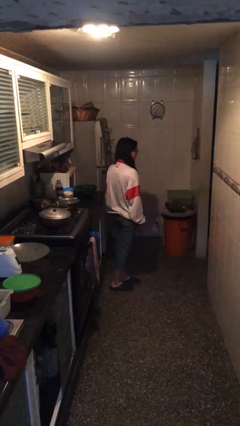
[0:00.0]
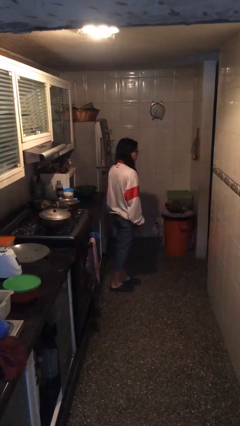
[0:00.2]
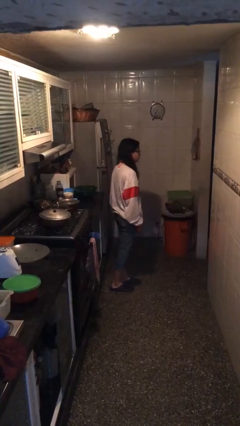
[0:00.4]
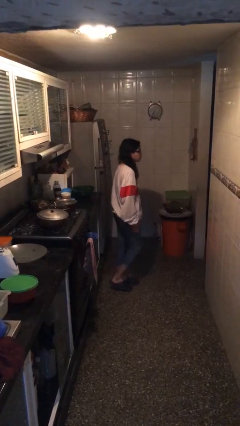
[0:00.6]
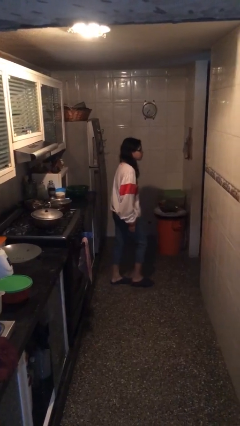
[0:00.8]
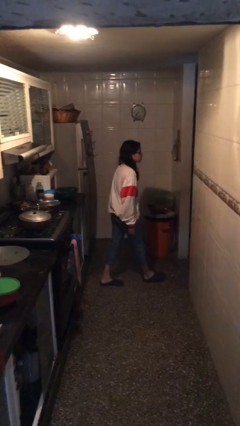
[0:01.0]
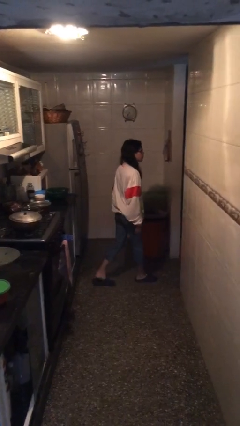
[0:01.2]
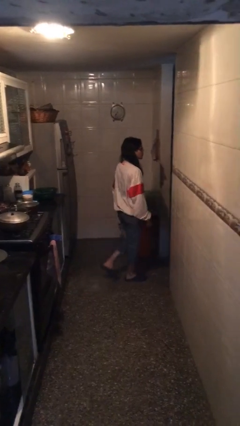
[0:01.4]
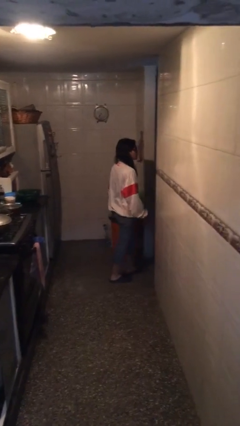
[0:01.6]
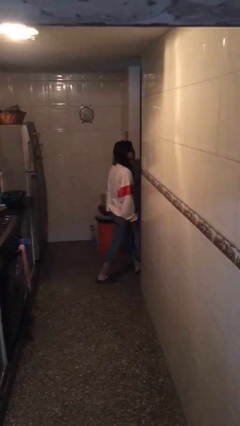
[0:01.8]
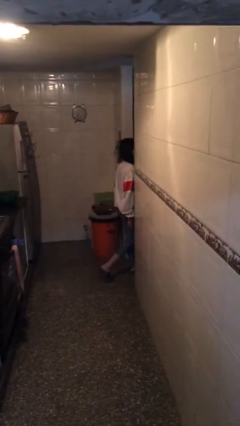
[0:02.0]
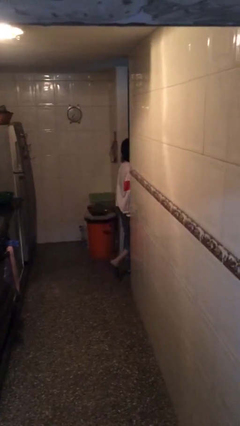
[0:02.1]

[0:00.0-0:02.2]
person exits scene through structure

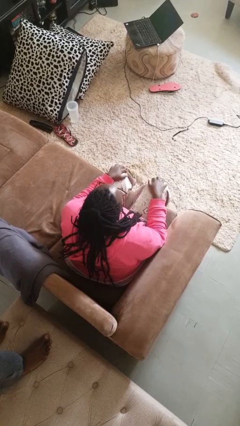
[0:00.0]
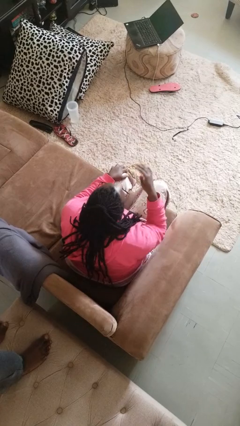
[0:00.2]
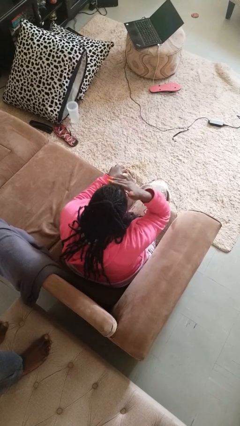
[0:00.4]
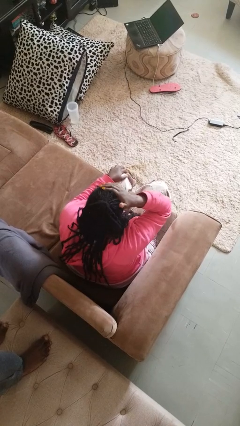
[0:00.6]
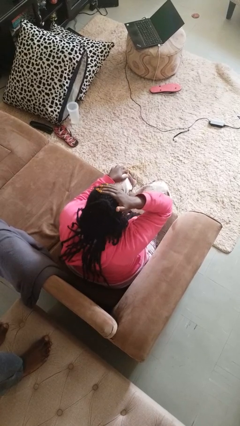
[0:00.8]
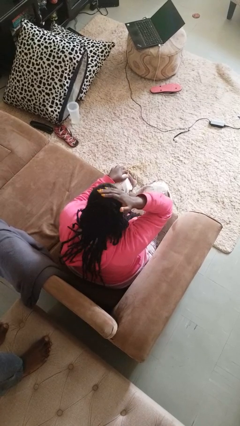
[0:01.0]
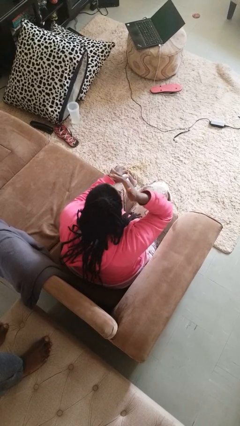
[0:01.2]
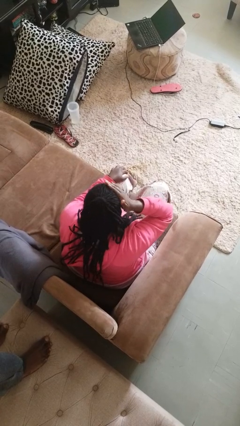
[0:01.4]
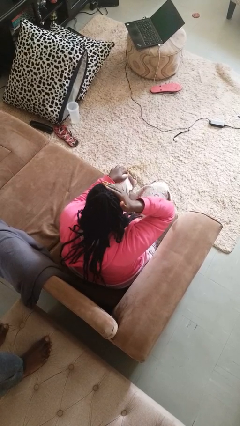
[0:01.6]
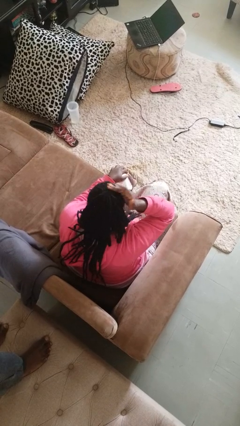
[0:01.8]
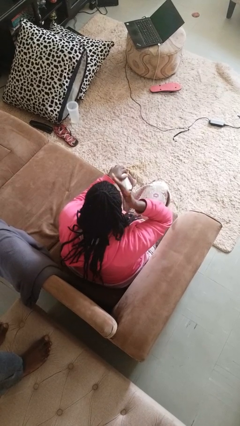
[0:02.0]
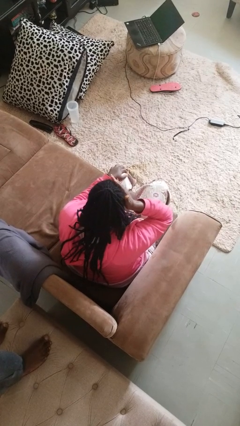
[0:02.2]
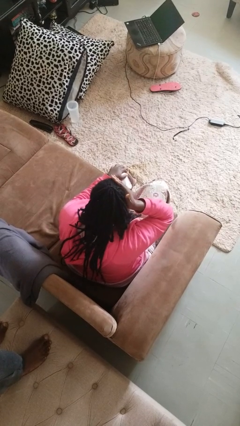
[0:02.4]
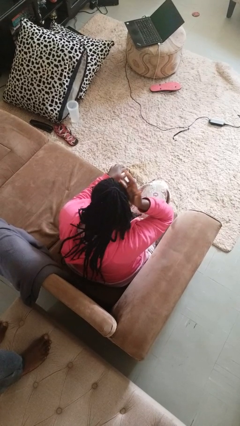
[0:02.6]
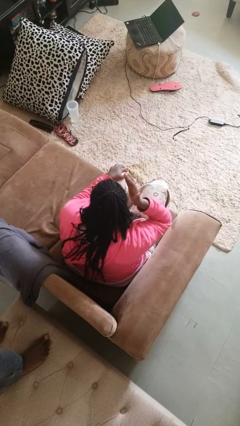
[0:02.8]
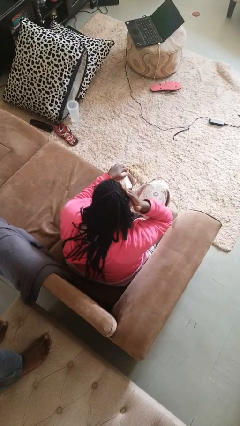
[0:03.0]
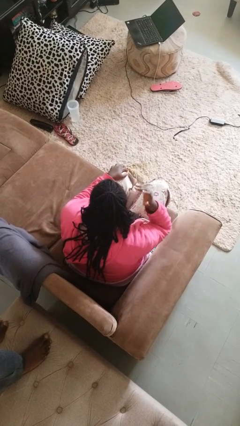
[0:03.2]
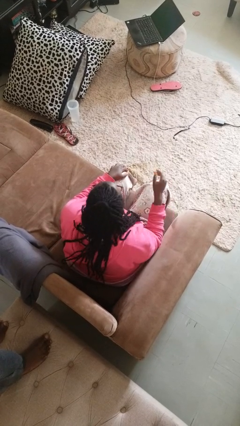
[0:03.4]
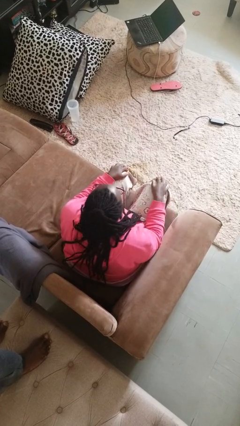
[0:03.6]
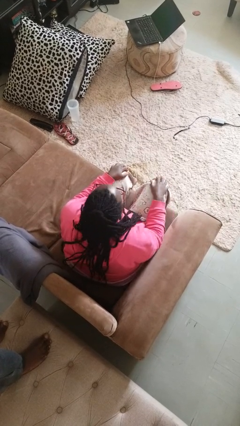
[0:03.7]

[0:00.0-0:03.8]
person strokes hair

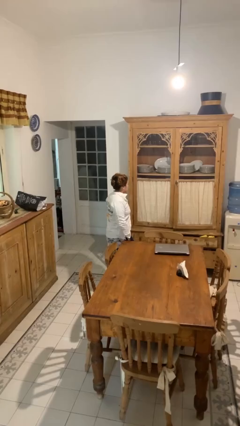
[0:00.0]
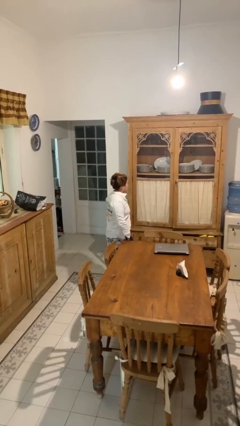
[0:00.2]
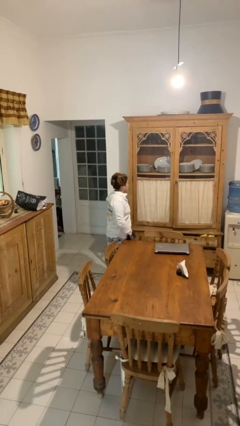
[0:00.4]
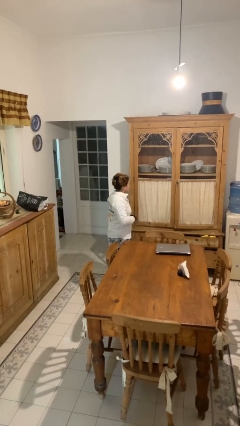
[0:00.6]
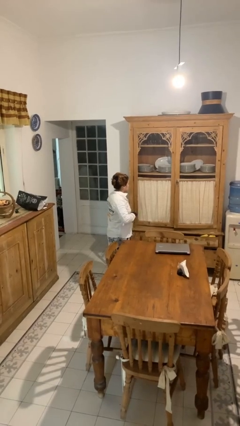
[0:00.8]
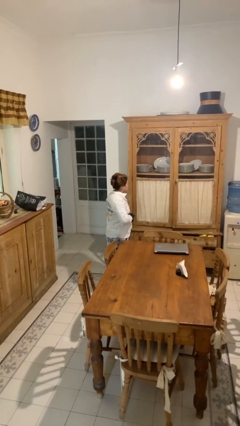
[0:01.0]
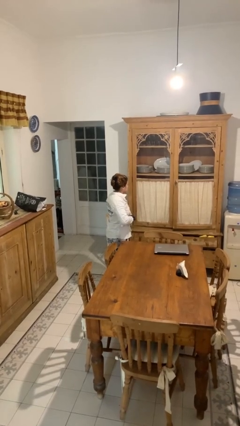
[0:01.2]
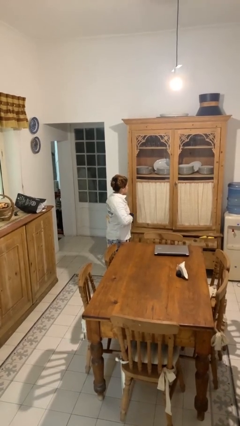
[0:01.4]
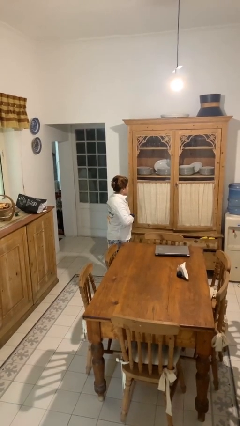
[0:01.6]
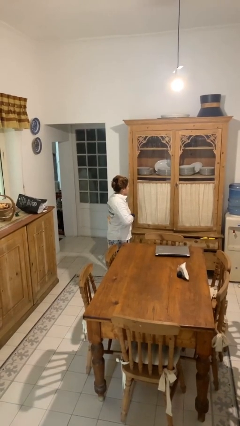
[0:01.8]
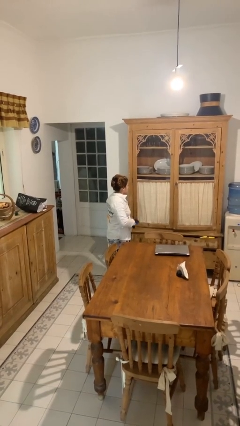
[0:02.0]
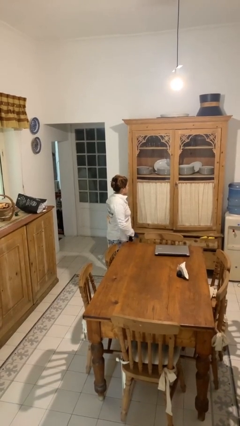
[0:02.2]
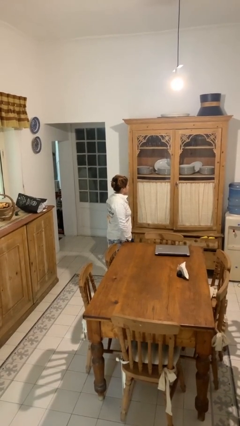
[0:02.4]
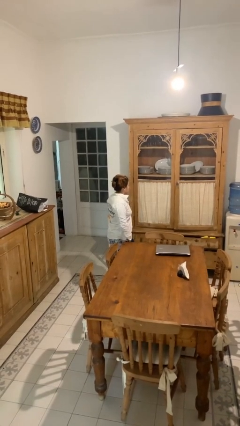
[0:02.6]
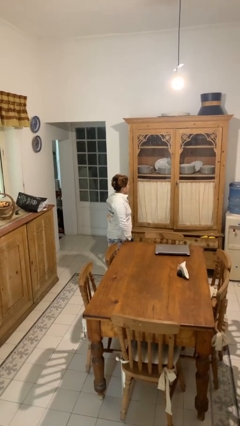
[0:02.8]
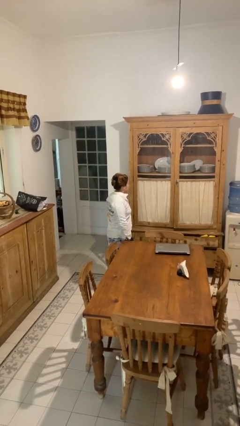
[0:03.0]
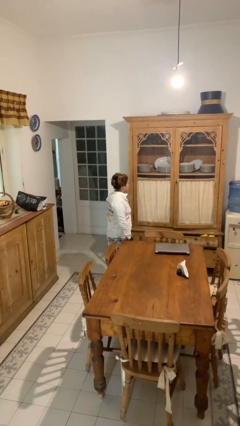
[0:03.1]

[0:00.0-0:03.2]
person buttons shirt

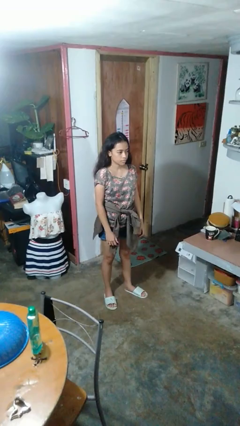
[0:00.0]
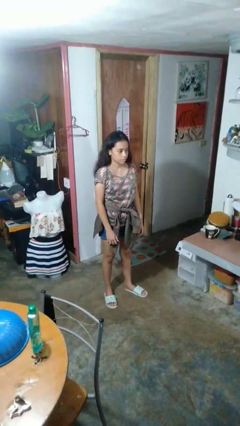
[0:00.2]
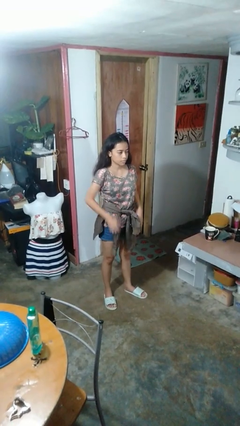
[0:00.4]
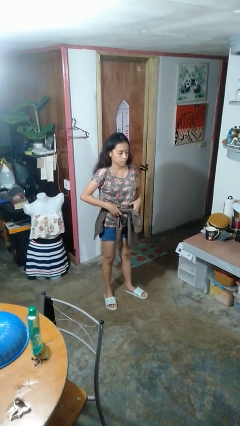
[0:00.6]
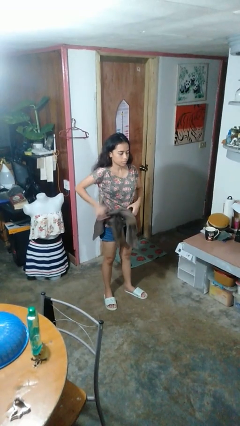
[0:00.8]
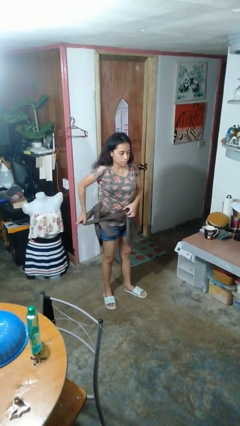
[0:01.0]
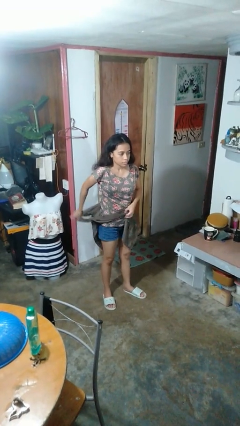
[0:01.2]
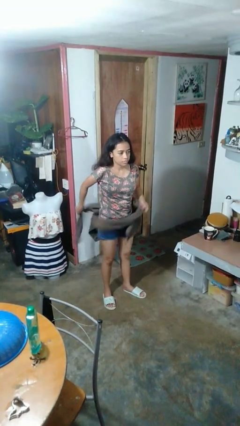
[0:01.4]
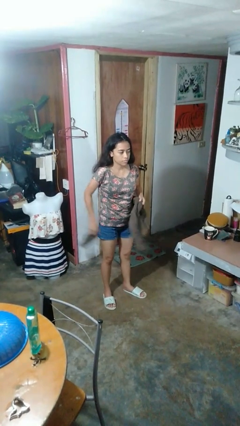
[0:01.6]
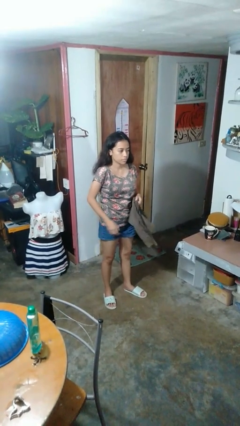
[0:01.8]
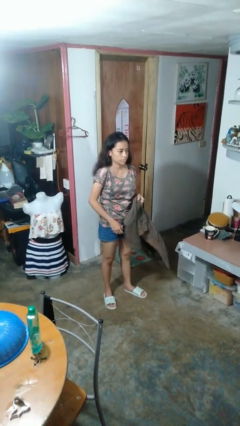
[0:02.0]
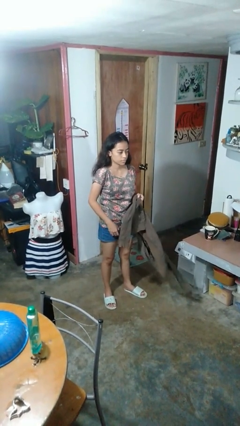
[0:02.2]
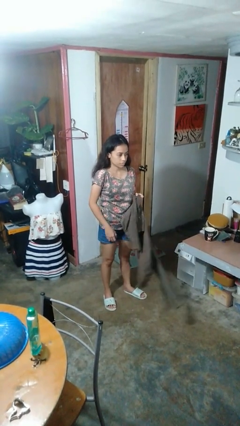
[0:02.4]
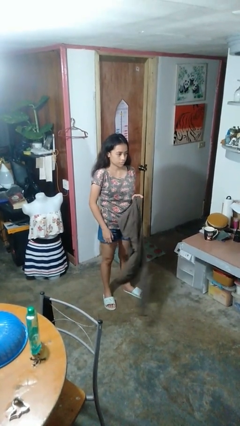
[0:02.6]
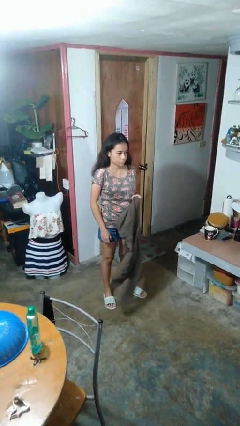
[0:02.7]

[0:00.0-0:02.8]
person unties jacket around waist

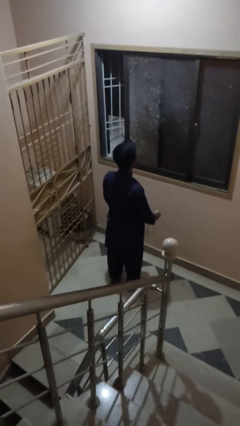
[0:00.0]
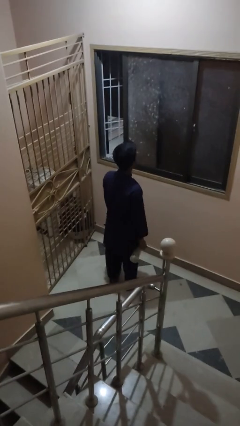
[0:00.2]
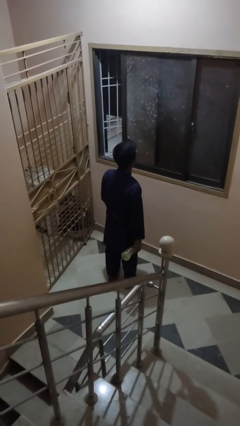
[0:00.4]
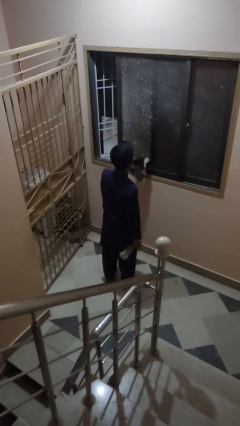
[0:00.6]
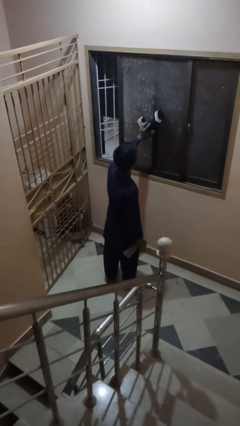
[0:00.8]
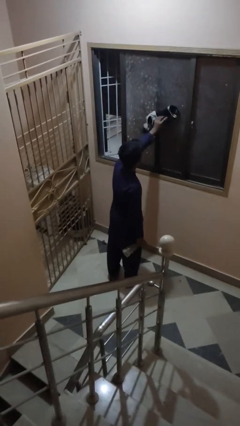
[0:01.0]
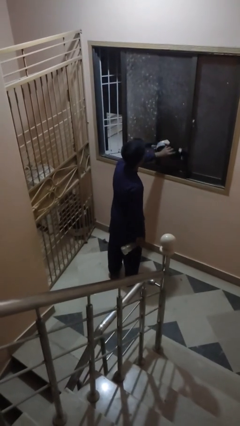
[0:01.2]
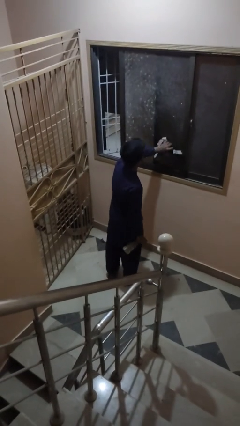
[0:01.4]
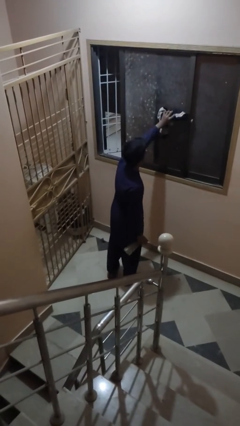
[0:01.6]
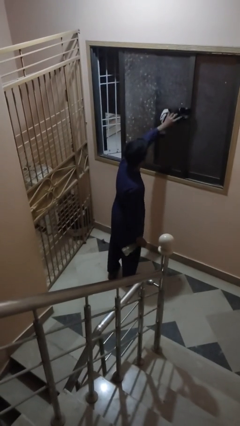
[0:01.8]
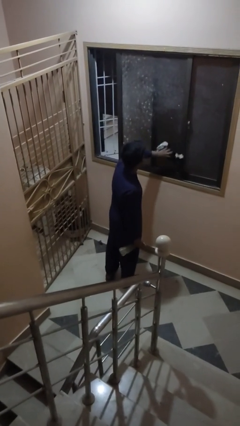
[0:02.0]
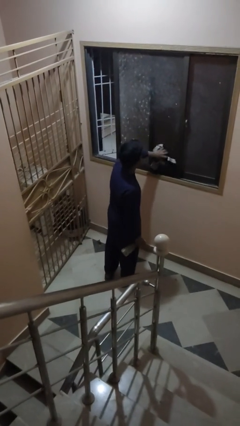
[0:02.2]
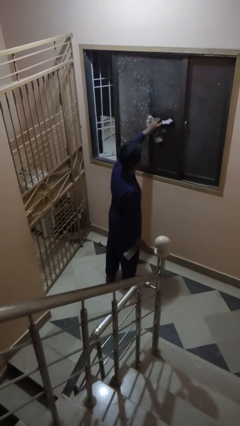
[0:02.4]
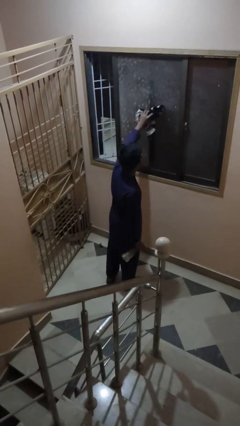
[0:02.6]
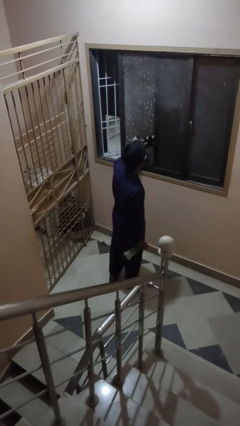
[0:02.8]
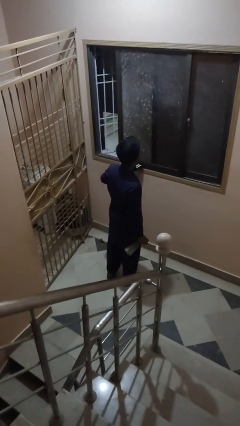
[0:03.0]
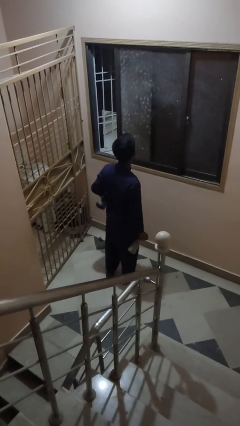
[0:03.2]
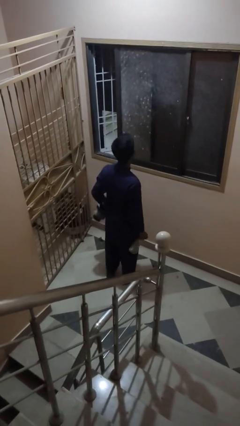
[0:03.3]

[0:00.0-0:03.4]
person washes window

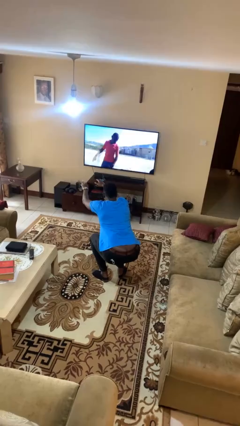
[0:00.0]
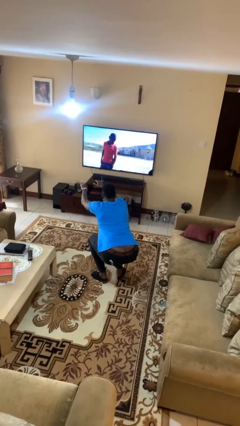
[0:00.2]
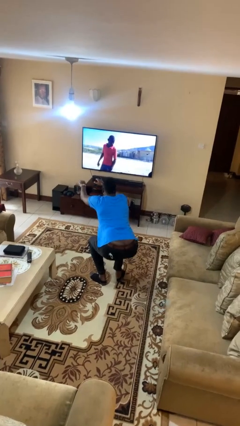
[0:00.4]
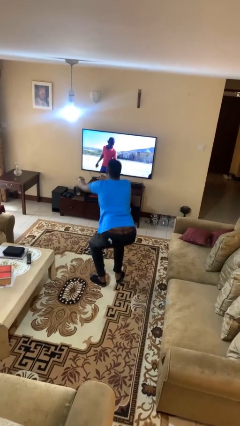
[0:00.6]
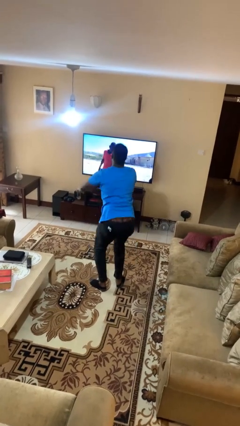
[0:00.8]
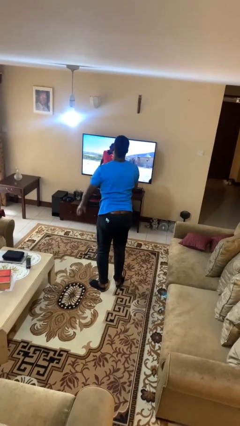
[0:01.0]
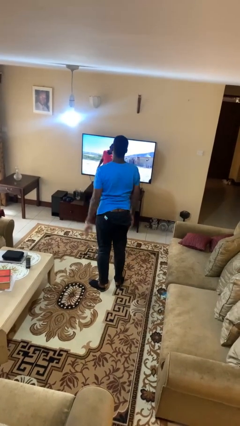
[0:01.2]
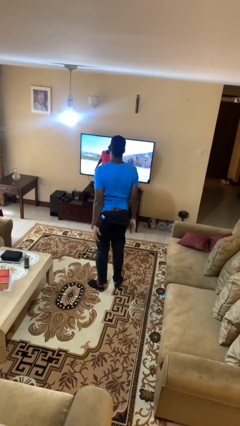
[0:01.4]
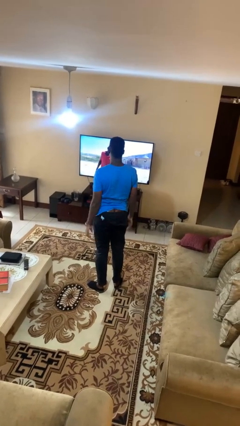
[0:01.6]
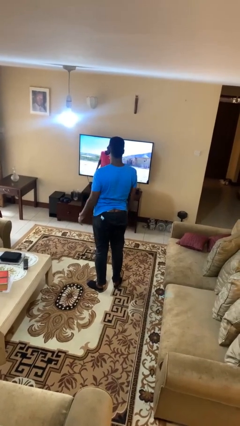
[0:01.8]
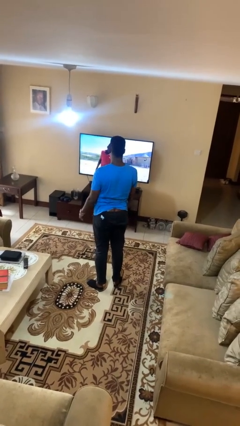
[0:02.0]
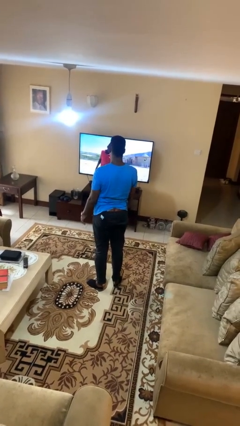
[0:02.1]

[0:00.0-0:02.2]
person stands up
